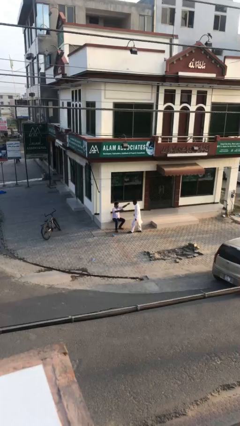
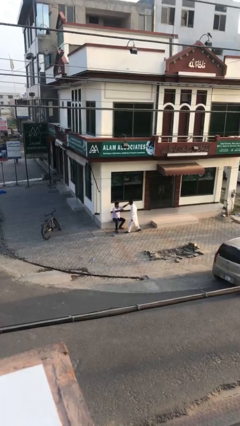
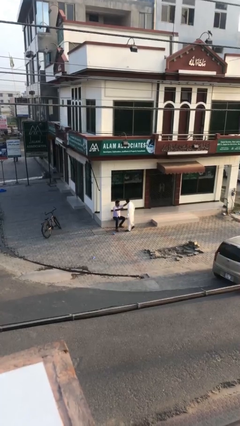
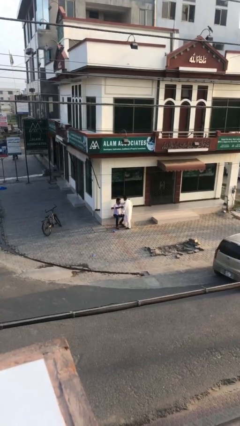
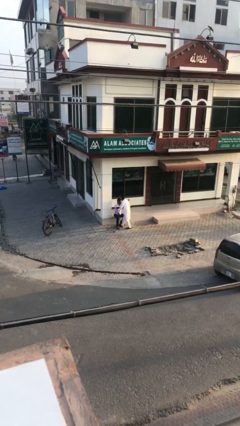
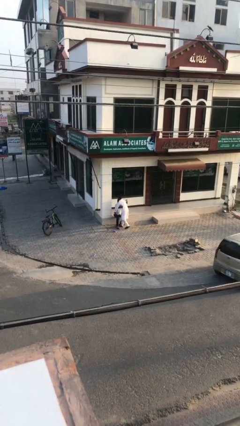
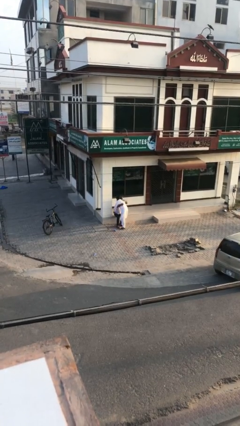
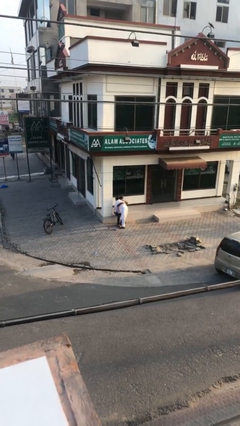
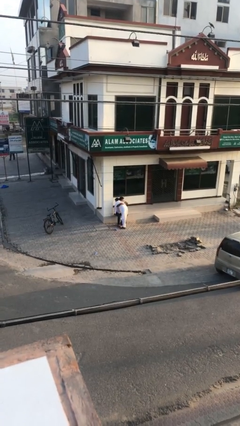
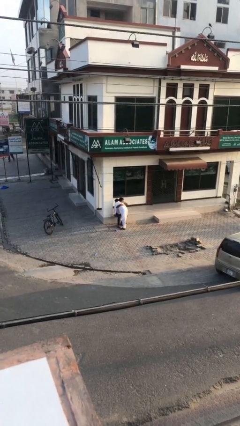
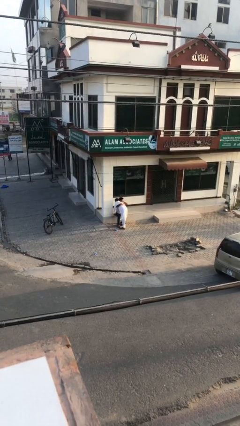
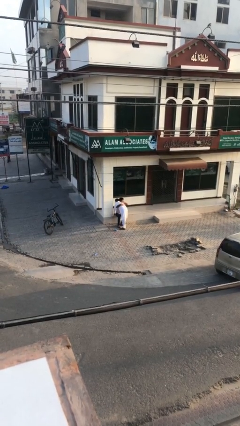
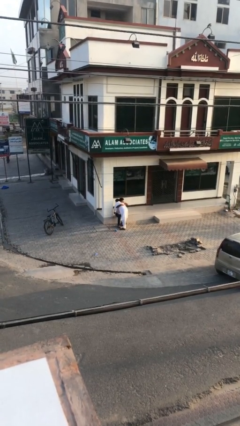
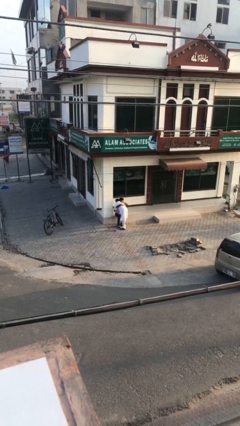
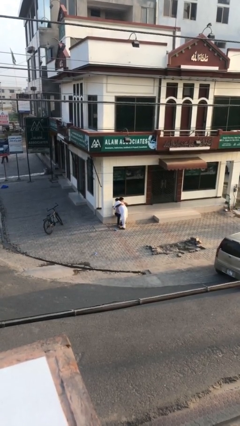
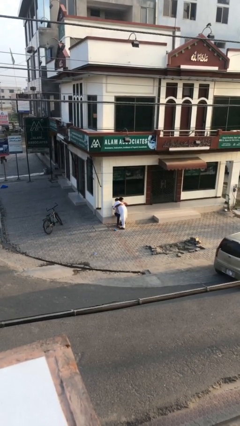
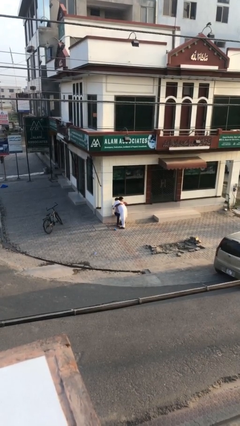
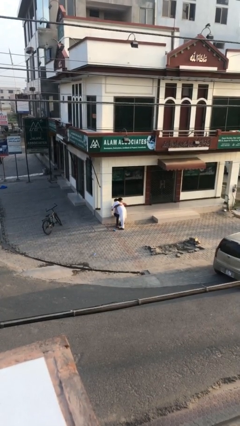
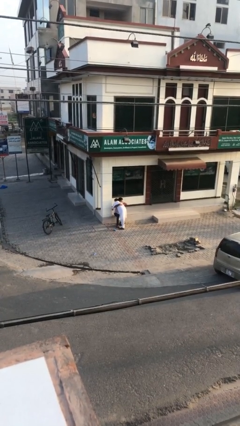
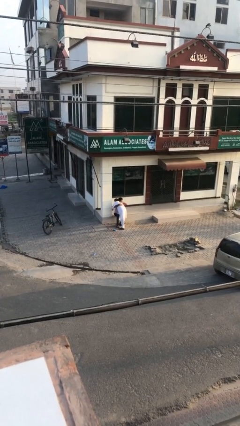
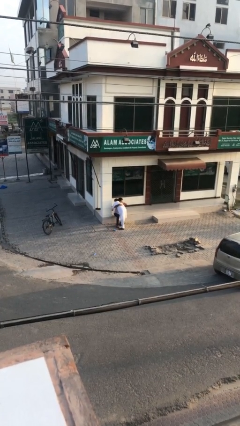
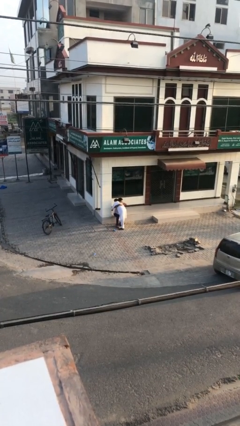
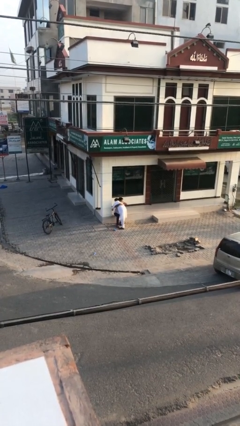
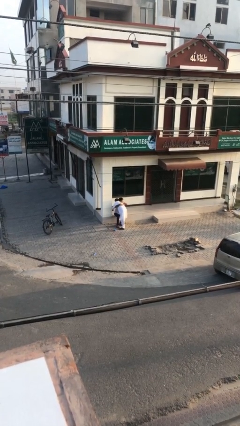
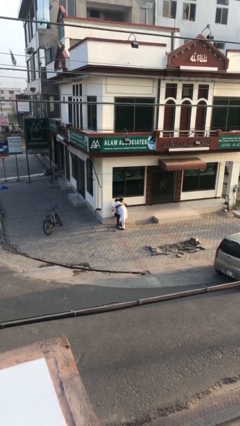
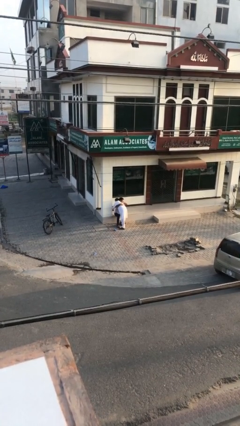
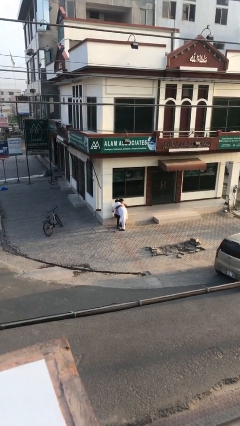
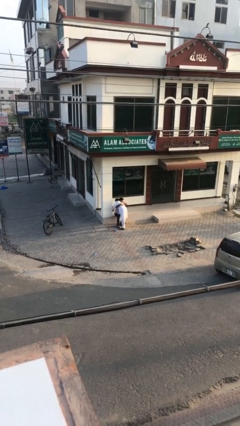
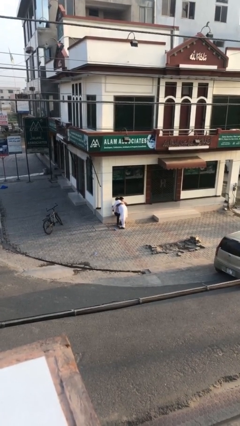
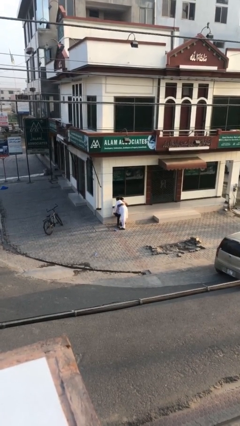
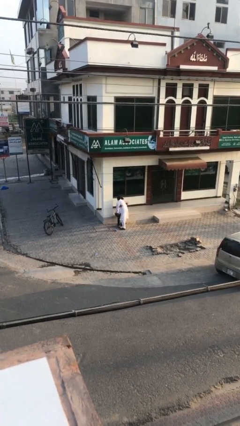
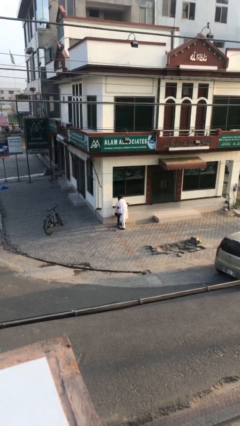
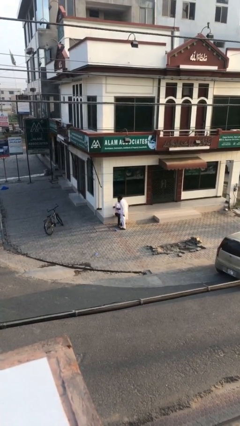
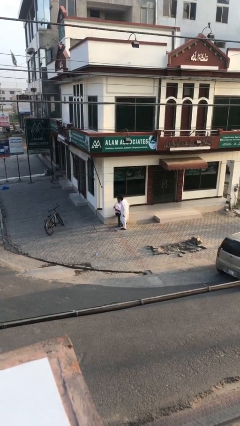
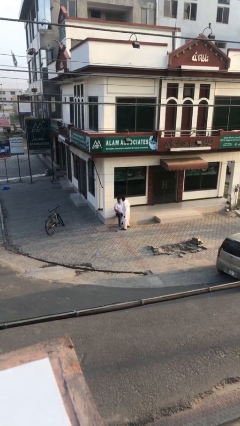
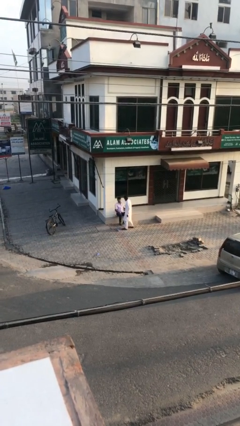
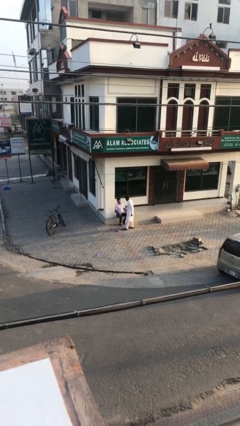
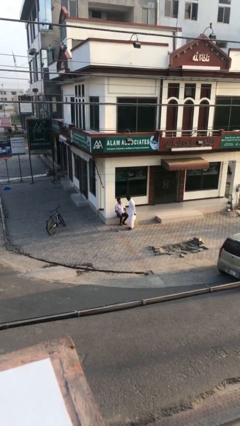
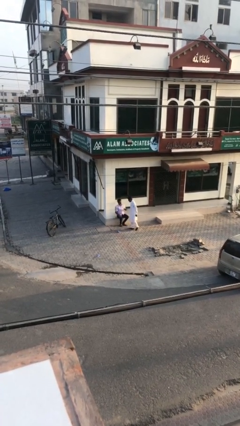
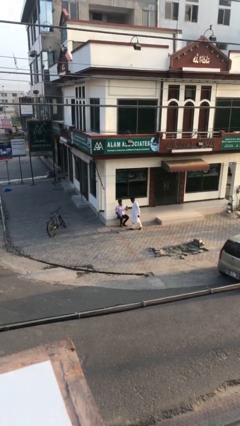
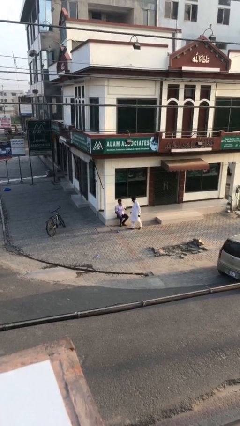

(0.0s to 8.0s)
person embraces person

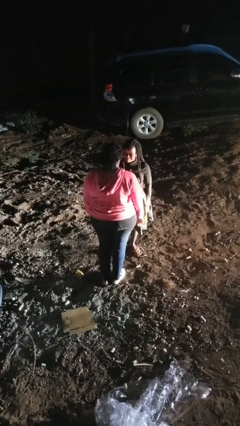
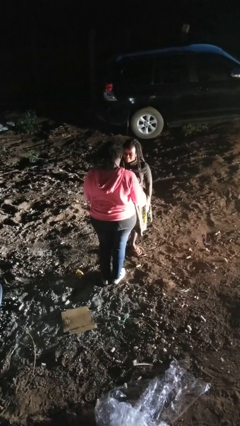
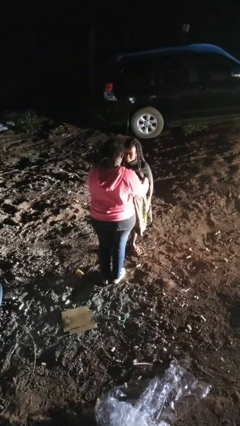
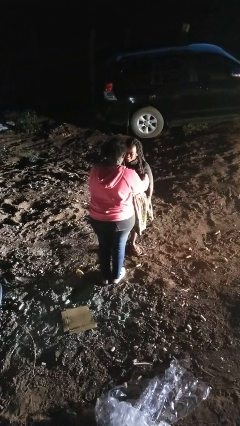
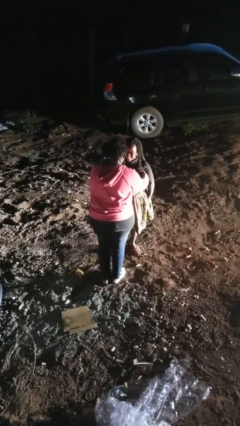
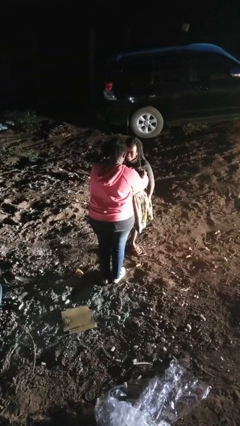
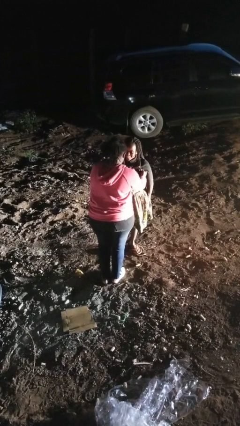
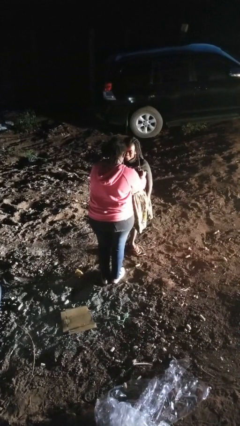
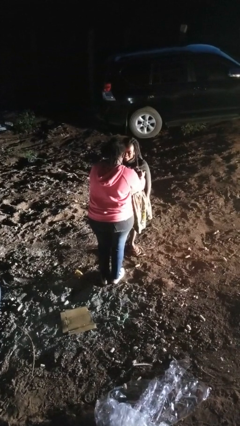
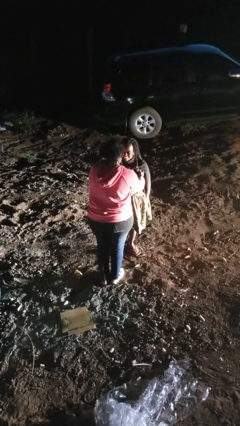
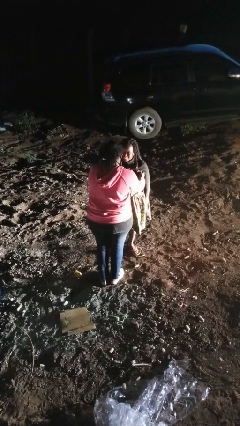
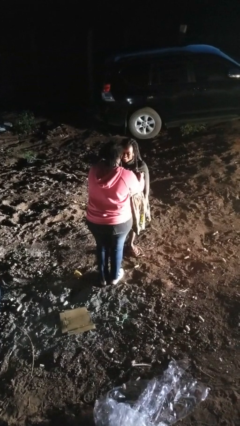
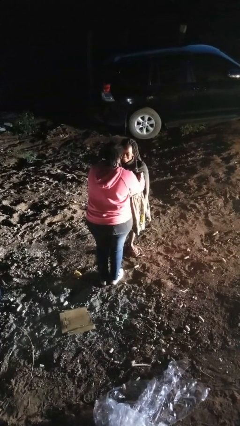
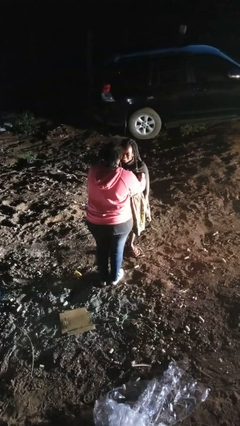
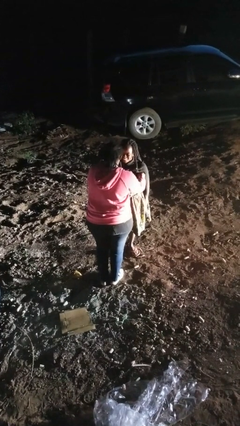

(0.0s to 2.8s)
person tickles person

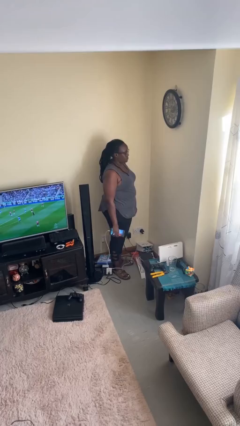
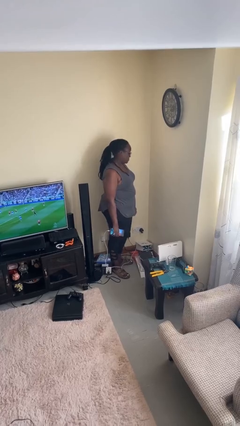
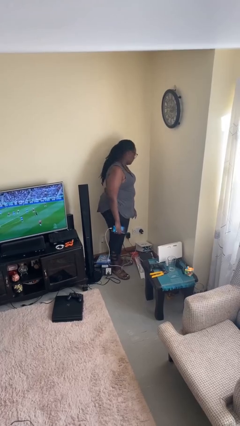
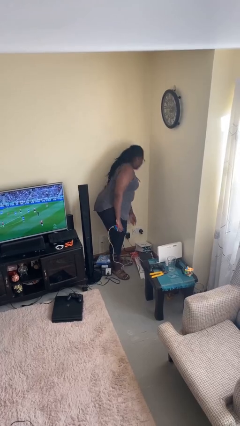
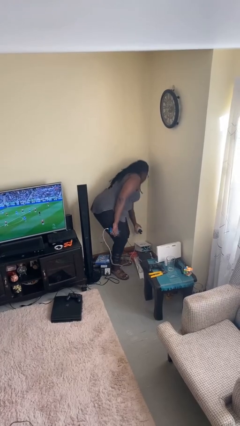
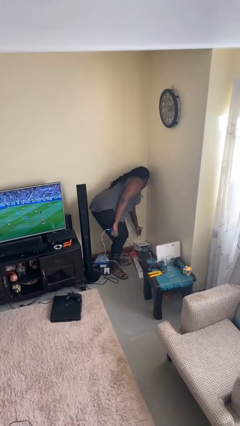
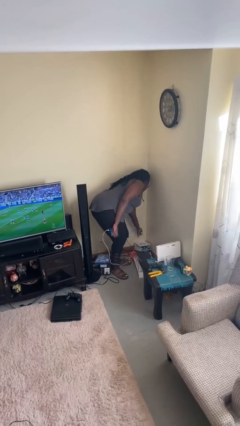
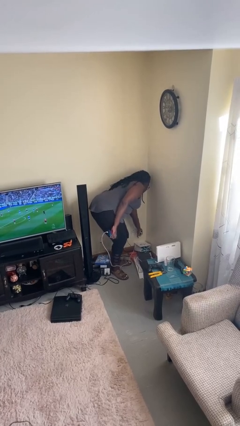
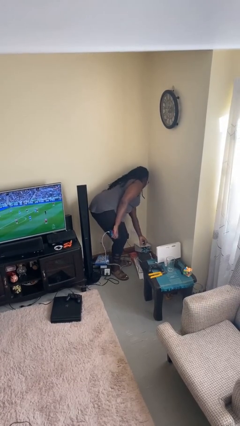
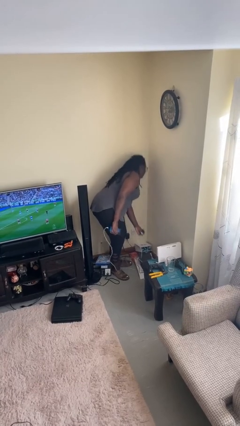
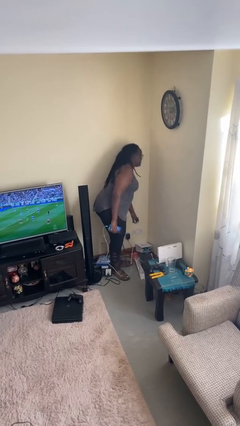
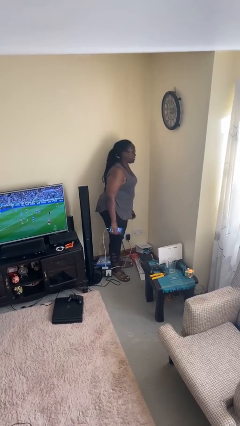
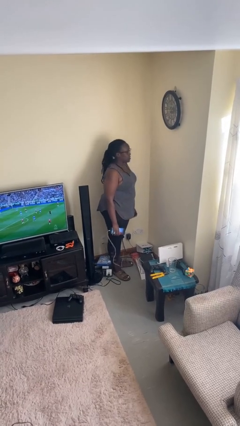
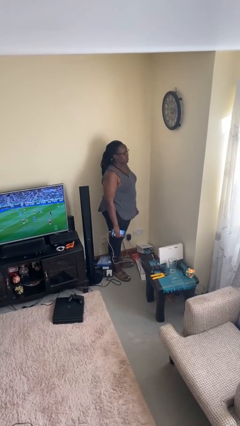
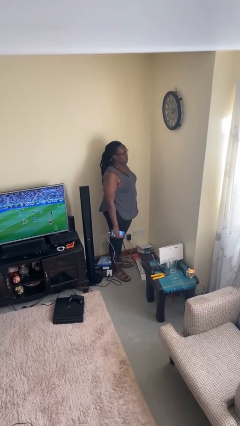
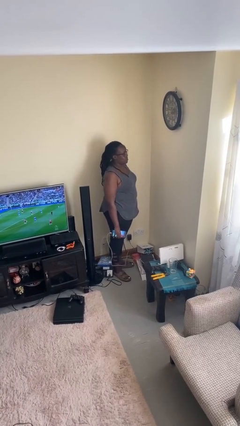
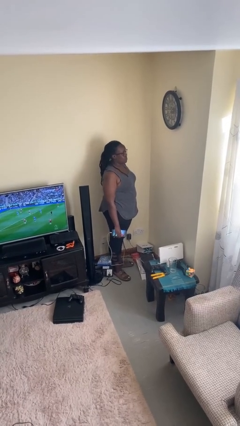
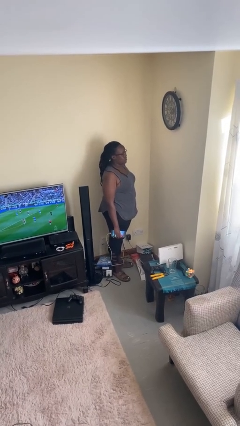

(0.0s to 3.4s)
person unplugs from electrical socket

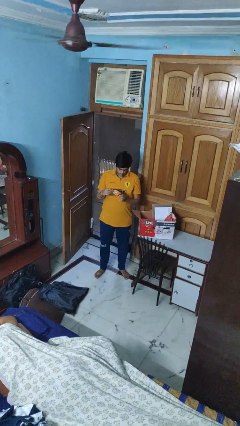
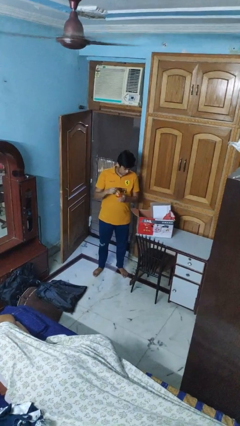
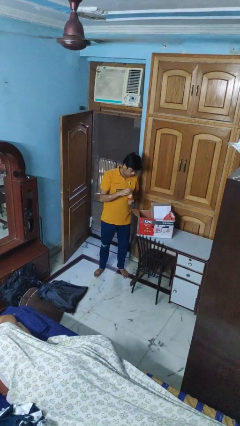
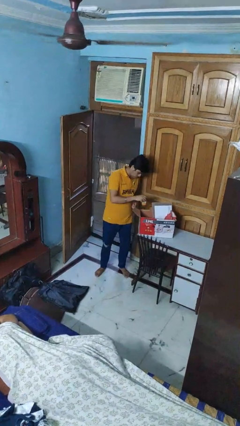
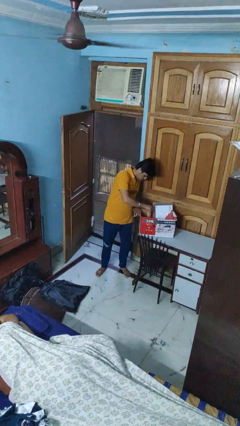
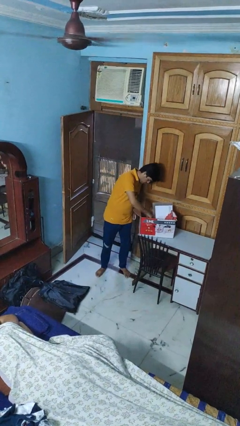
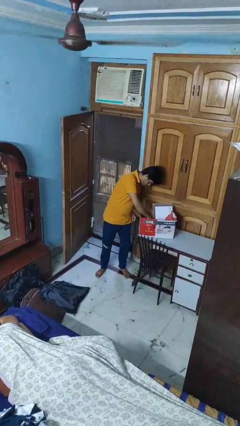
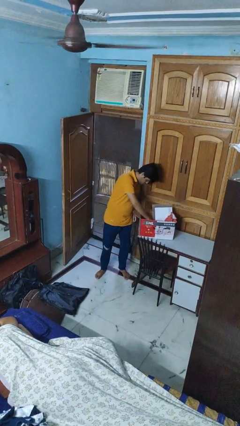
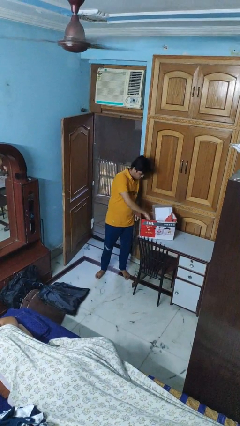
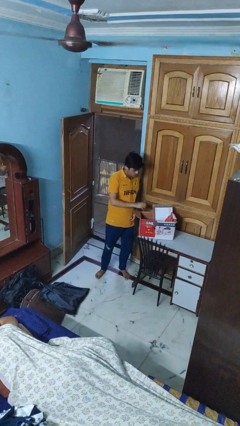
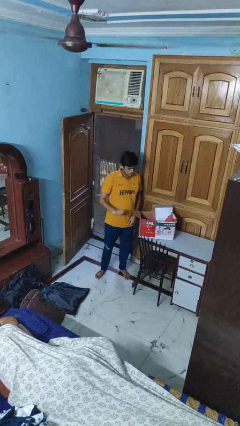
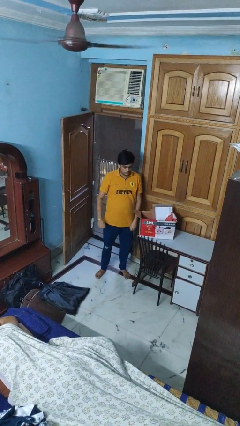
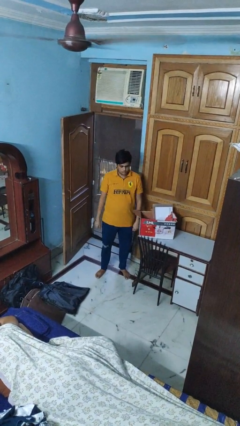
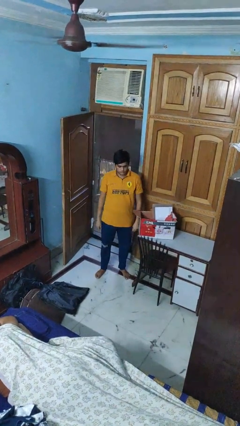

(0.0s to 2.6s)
person puts object into box

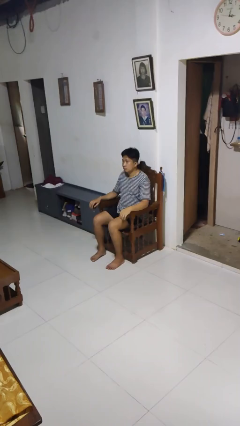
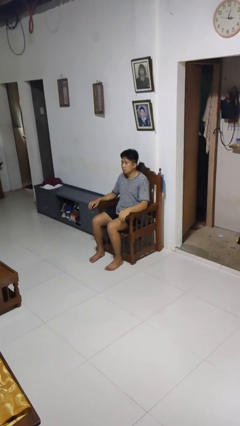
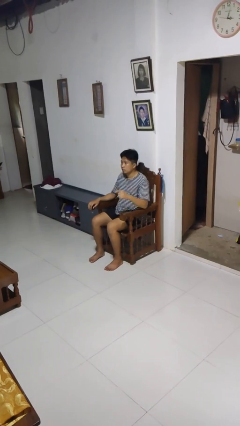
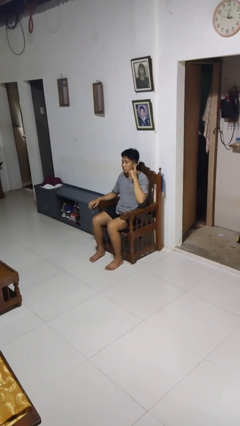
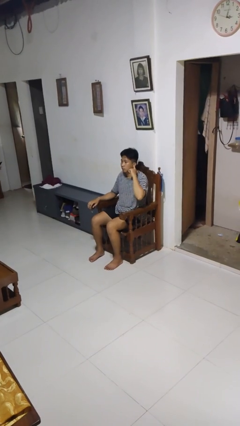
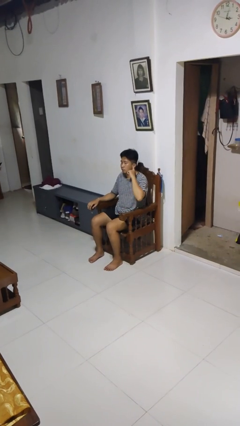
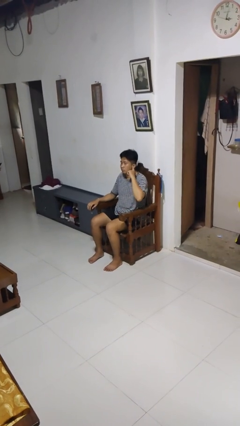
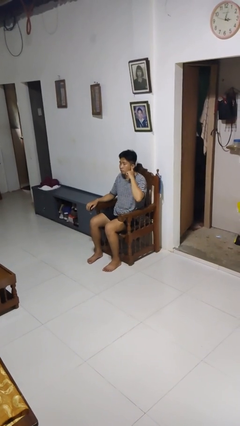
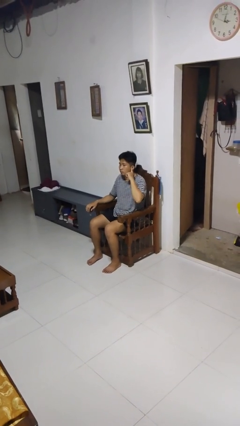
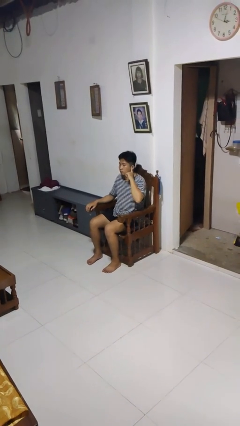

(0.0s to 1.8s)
person gestures listen closely
